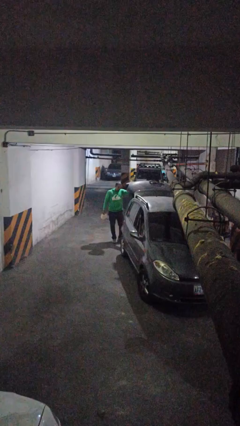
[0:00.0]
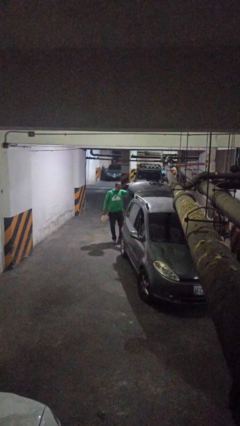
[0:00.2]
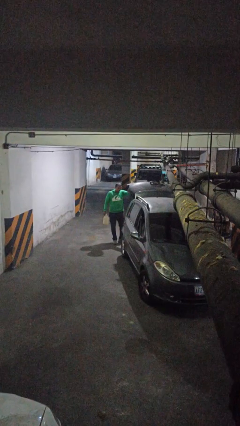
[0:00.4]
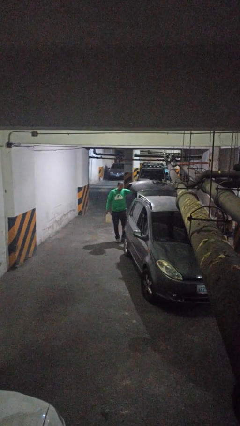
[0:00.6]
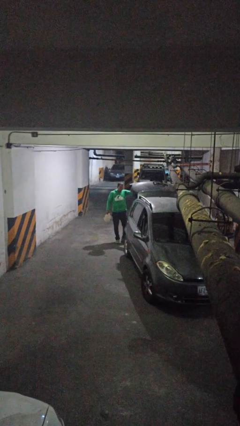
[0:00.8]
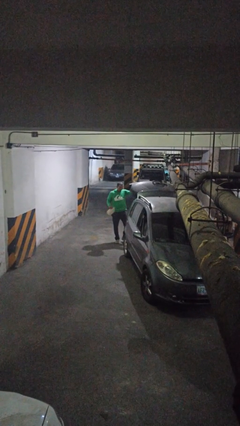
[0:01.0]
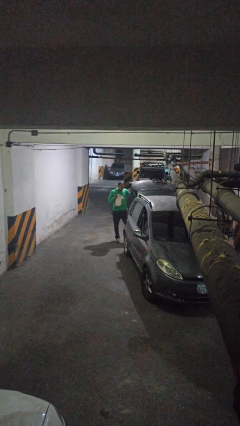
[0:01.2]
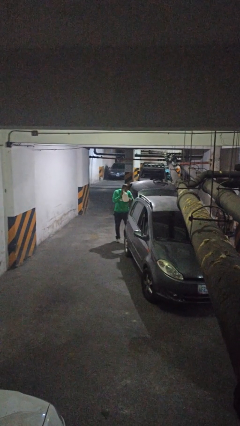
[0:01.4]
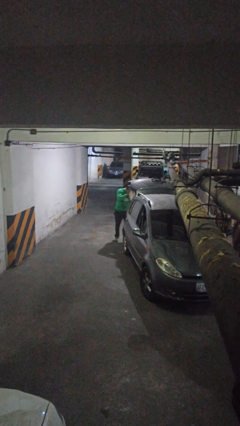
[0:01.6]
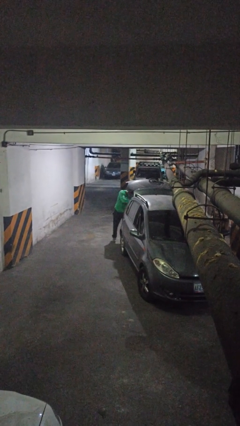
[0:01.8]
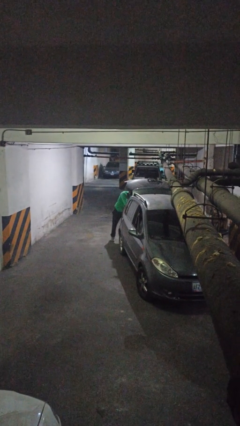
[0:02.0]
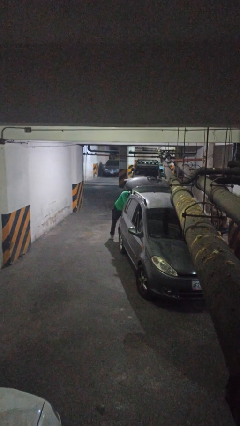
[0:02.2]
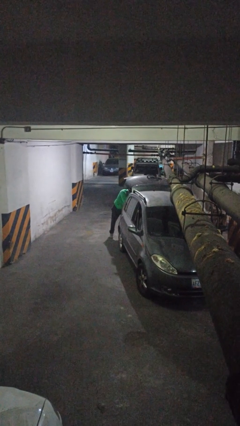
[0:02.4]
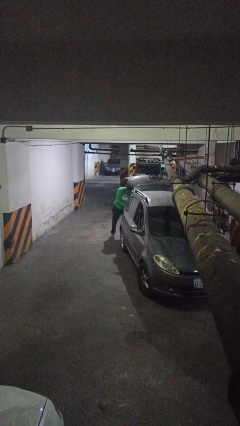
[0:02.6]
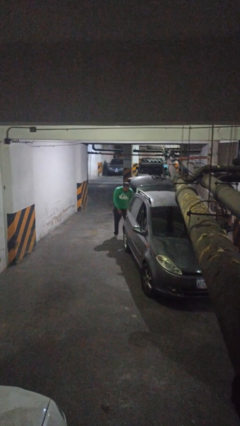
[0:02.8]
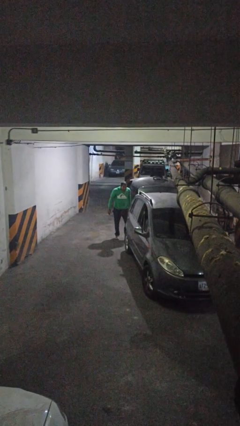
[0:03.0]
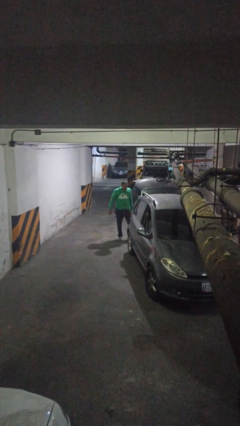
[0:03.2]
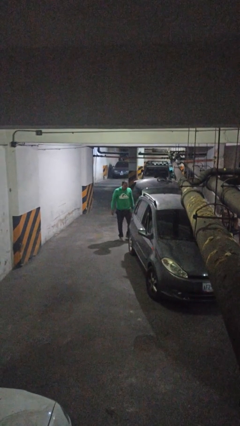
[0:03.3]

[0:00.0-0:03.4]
person loads car

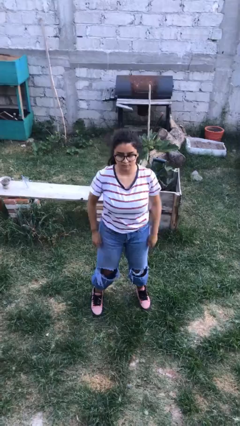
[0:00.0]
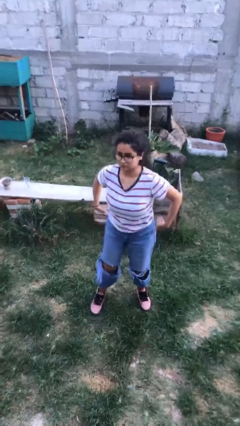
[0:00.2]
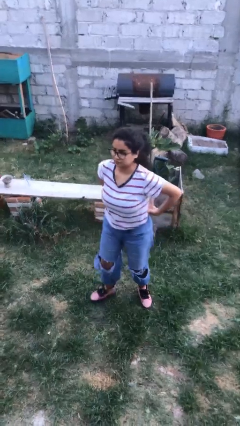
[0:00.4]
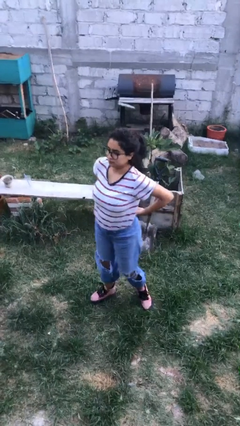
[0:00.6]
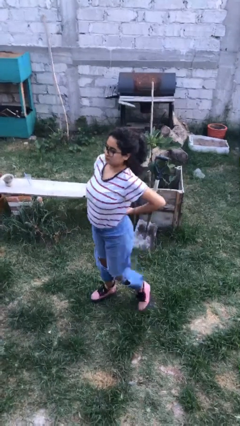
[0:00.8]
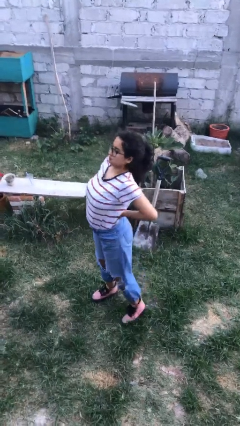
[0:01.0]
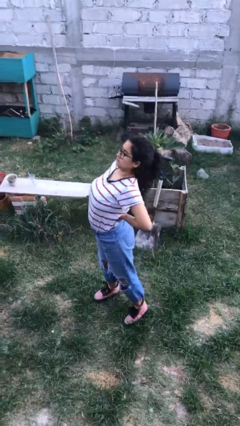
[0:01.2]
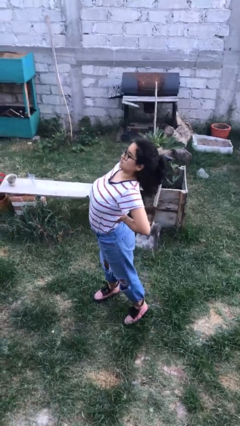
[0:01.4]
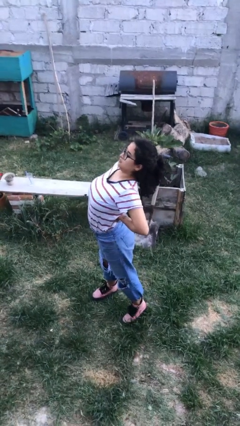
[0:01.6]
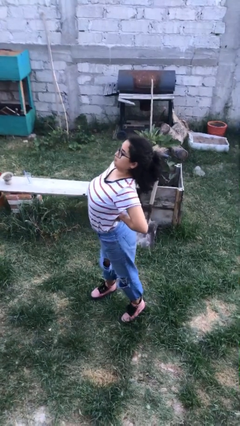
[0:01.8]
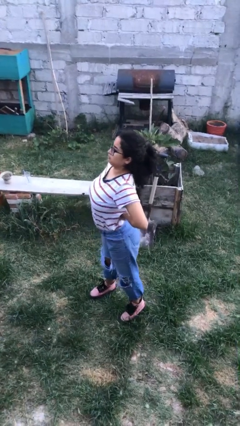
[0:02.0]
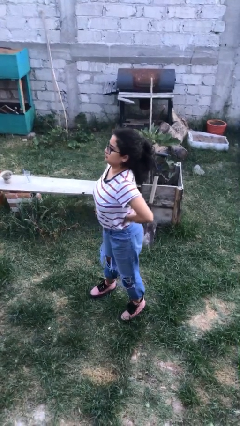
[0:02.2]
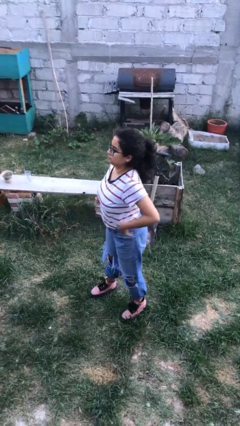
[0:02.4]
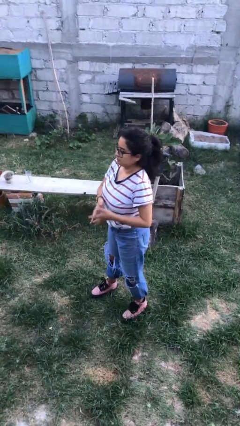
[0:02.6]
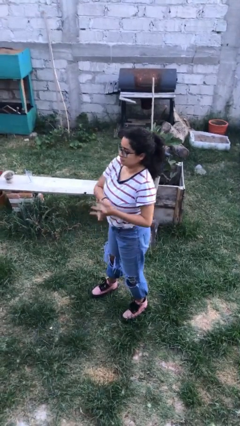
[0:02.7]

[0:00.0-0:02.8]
person stretches back

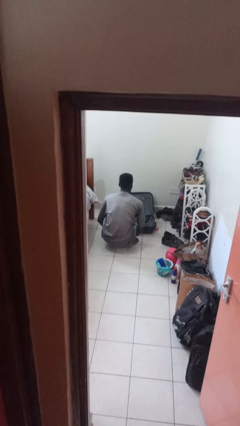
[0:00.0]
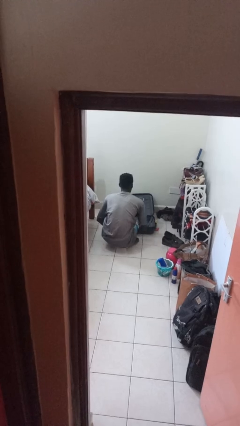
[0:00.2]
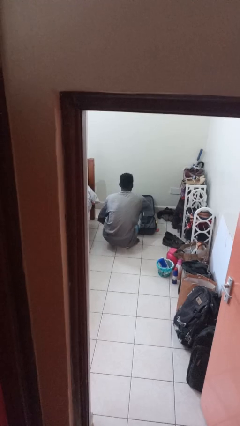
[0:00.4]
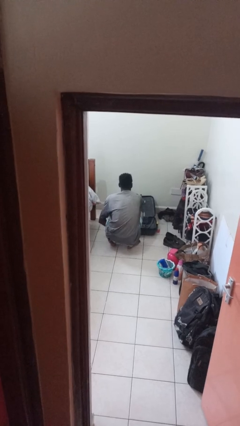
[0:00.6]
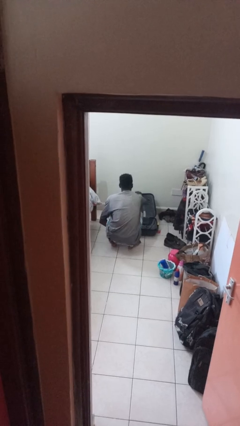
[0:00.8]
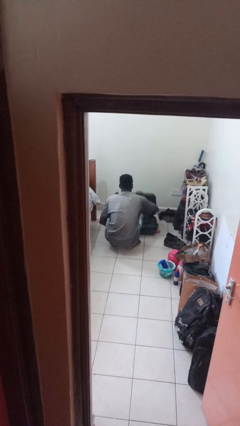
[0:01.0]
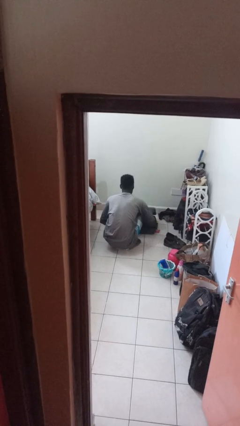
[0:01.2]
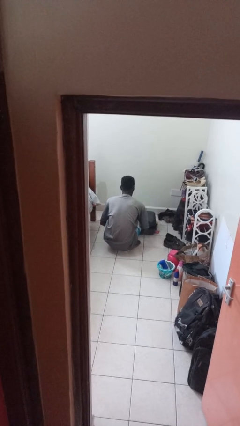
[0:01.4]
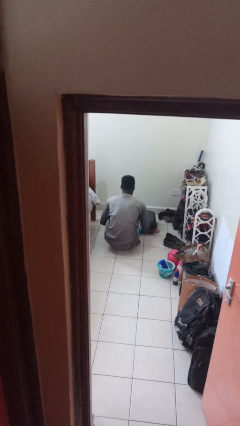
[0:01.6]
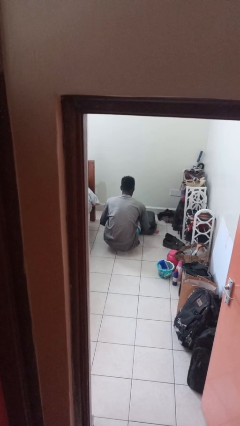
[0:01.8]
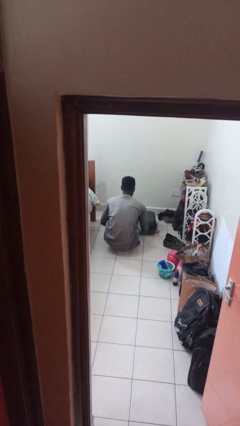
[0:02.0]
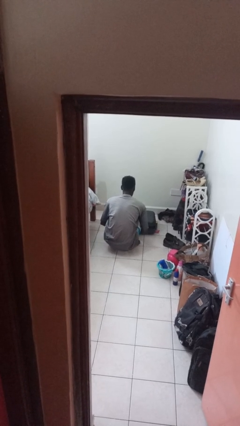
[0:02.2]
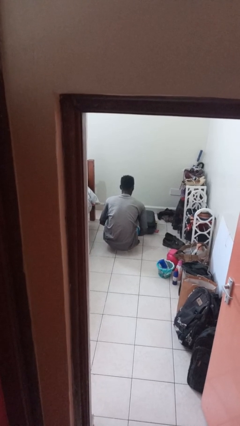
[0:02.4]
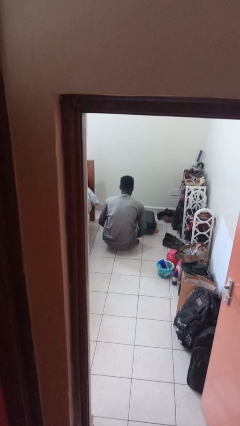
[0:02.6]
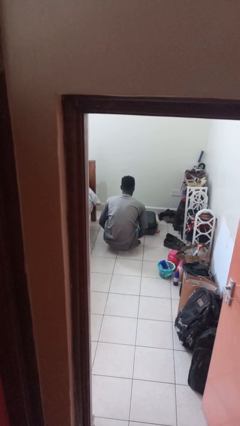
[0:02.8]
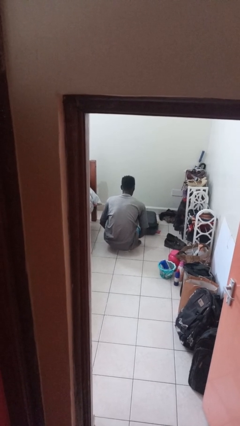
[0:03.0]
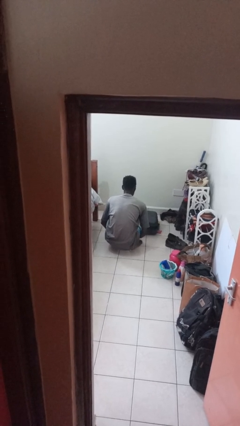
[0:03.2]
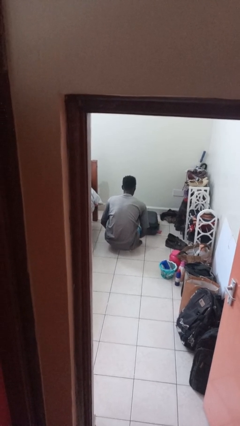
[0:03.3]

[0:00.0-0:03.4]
person closes suitcase

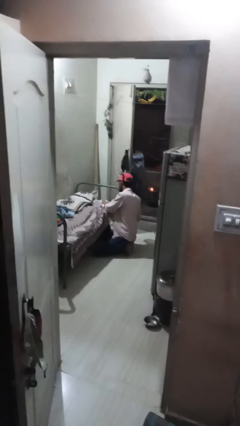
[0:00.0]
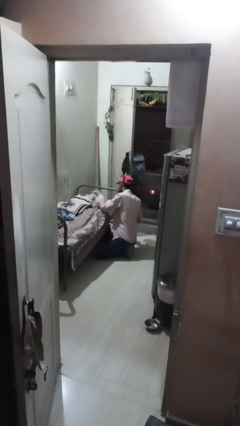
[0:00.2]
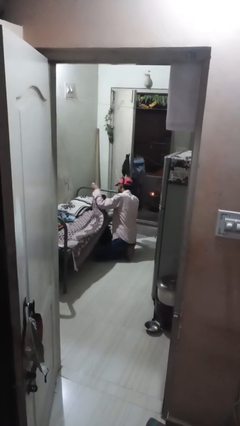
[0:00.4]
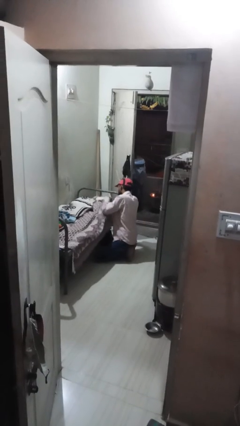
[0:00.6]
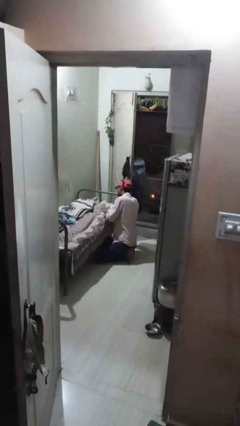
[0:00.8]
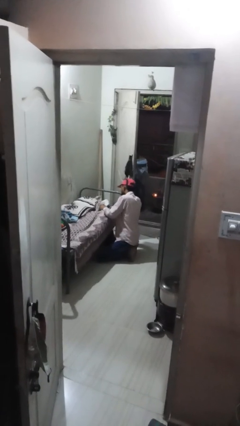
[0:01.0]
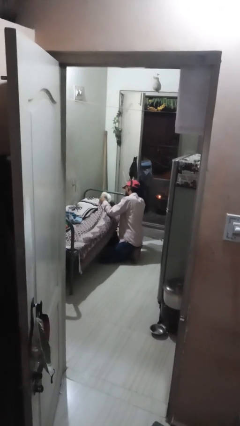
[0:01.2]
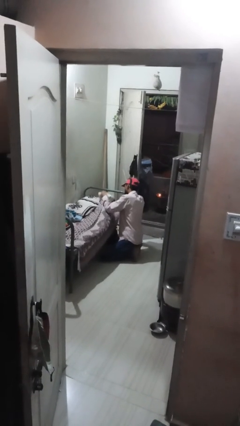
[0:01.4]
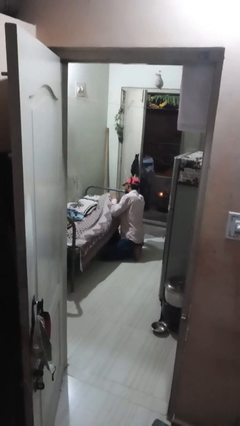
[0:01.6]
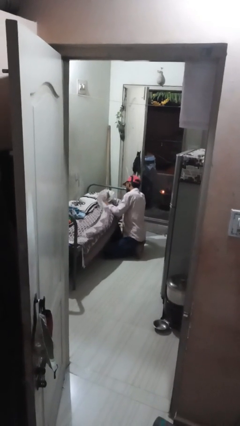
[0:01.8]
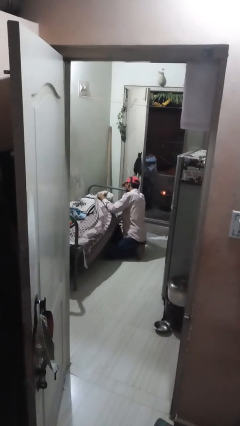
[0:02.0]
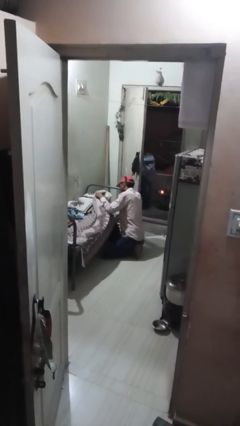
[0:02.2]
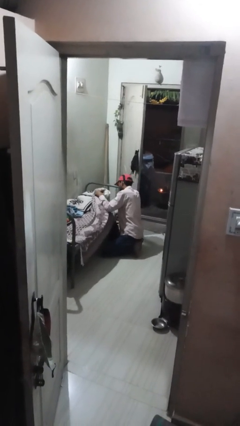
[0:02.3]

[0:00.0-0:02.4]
person searches under couch

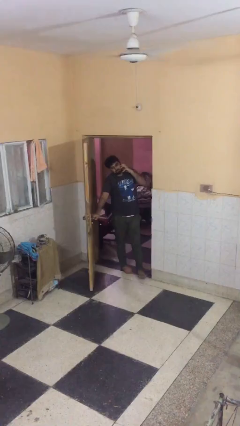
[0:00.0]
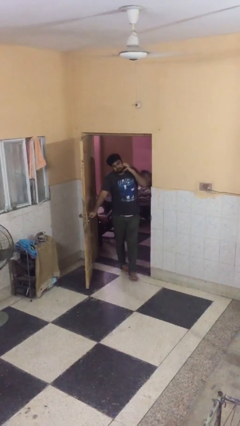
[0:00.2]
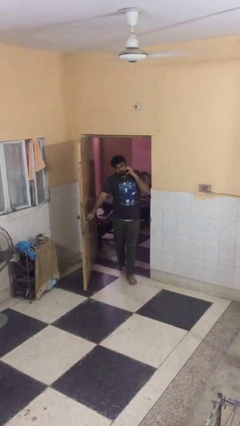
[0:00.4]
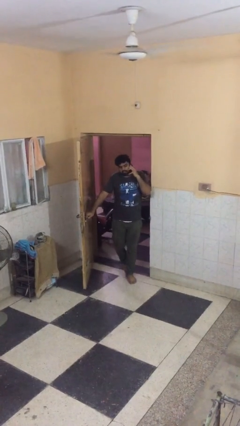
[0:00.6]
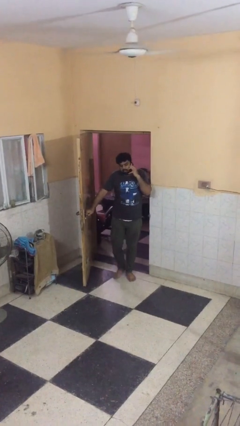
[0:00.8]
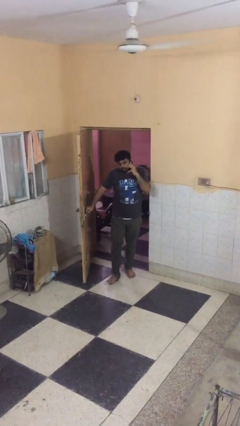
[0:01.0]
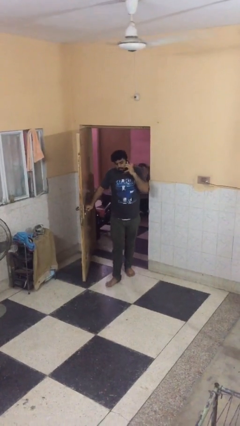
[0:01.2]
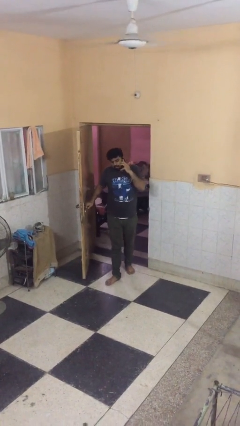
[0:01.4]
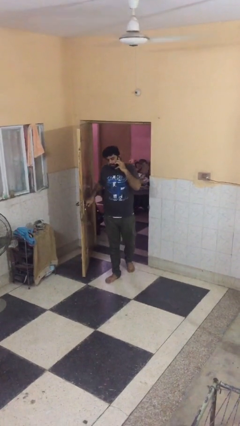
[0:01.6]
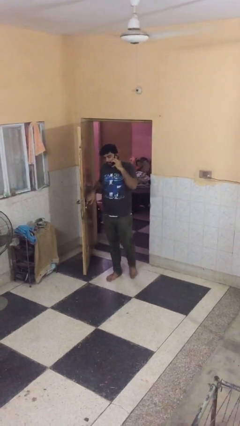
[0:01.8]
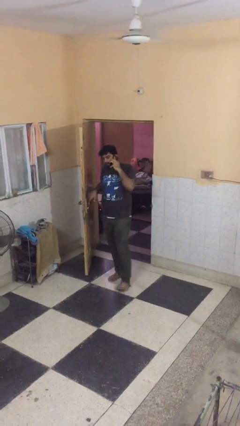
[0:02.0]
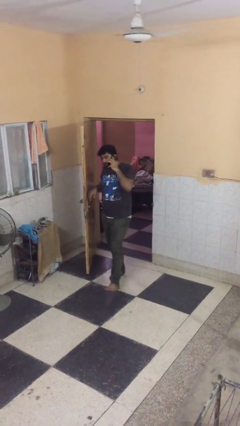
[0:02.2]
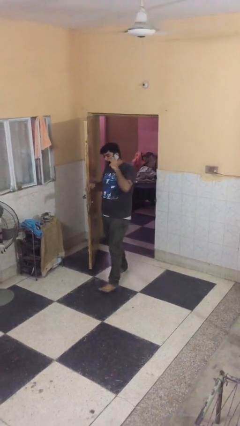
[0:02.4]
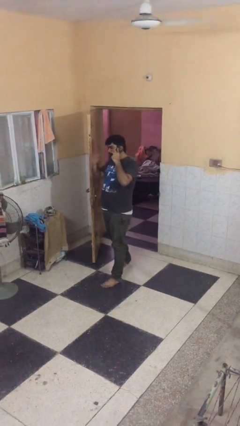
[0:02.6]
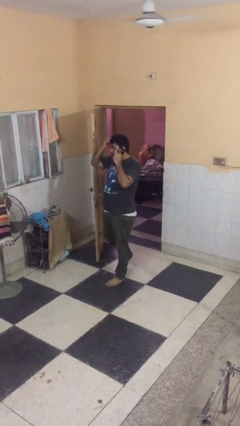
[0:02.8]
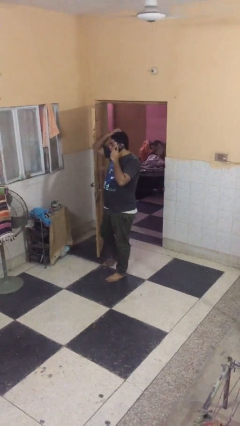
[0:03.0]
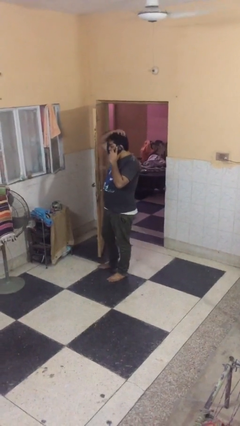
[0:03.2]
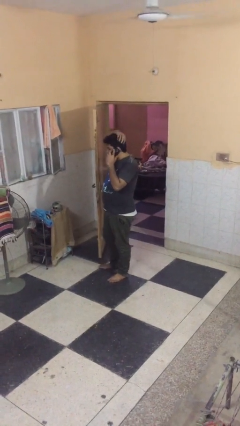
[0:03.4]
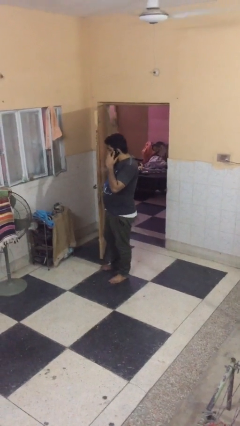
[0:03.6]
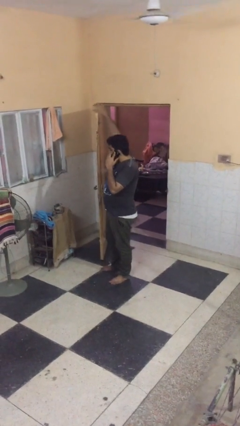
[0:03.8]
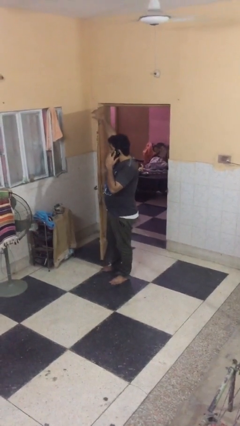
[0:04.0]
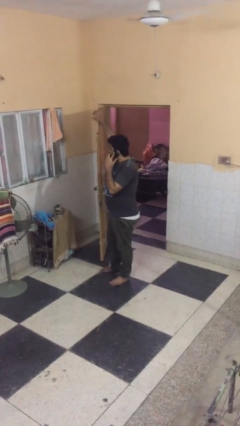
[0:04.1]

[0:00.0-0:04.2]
person enters scene through structure

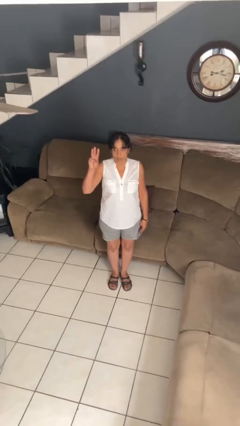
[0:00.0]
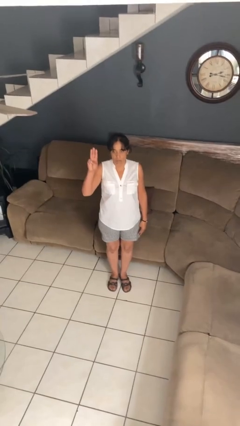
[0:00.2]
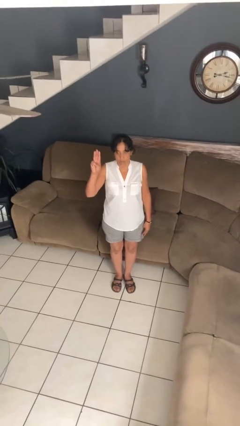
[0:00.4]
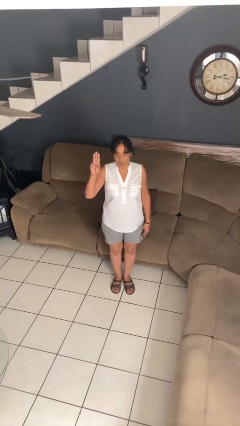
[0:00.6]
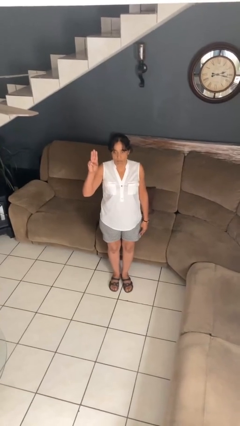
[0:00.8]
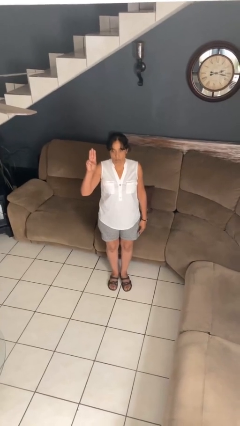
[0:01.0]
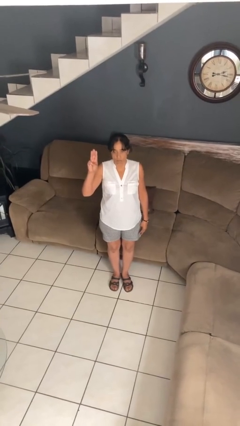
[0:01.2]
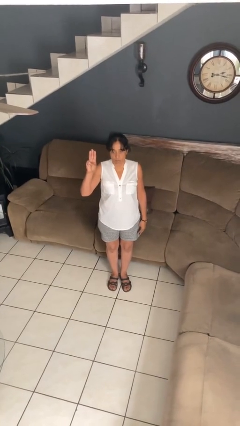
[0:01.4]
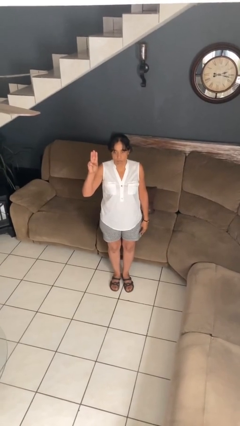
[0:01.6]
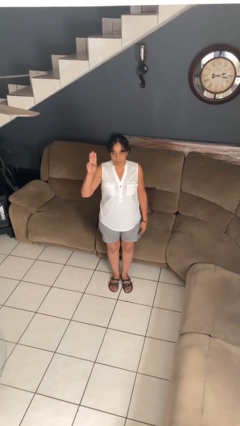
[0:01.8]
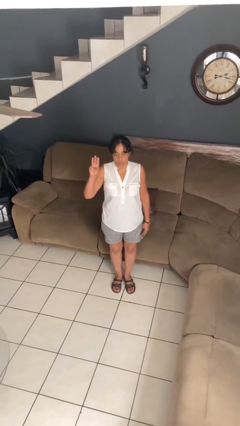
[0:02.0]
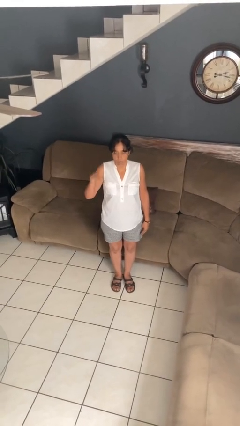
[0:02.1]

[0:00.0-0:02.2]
person gestures number three
